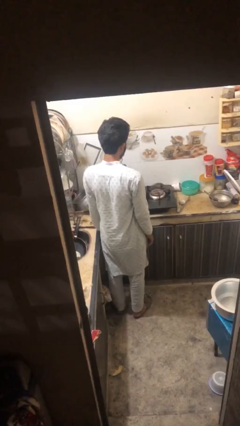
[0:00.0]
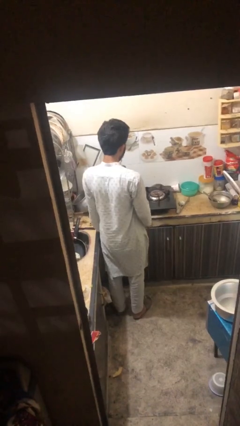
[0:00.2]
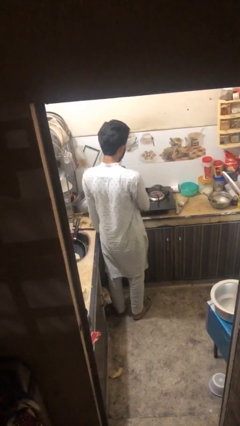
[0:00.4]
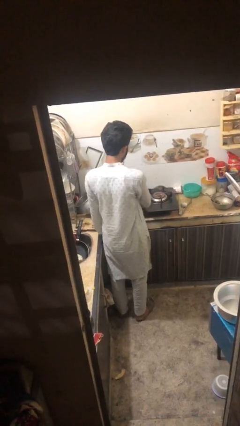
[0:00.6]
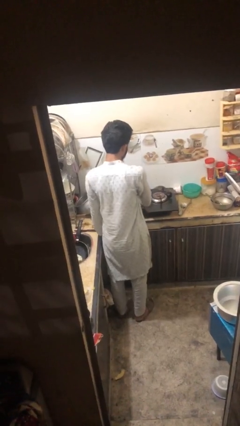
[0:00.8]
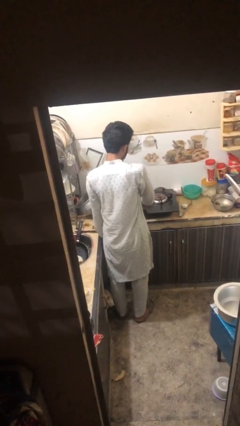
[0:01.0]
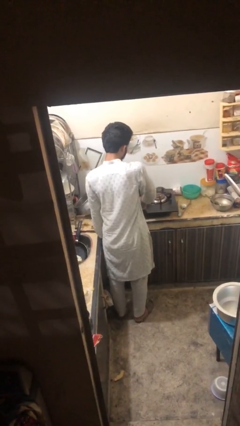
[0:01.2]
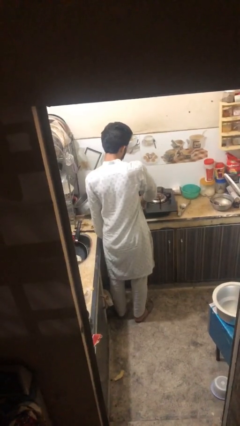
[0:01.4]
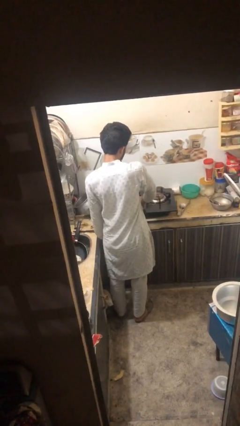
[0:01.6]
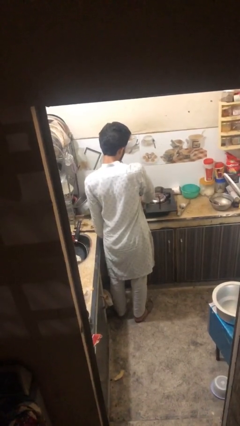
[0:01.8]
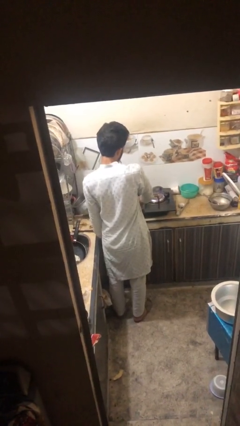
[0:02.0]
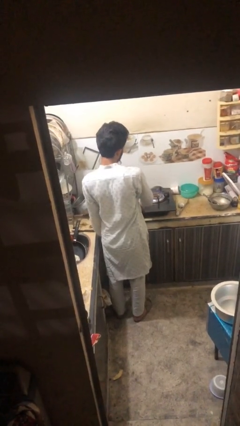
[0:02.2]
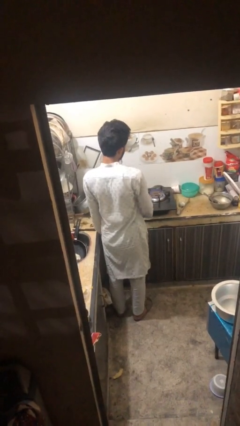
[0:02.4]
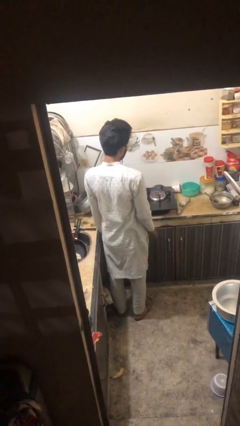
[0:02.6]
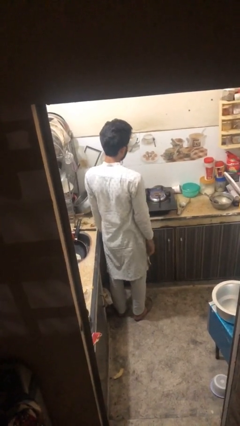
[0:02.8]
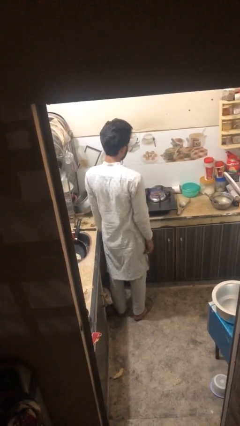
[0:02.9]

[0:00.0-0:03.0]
person turns on stovetop

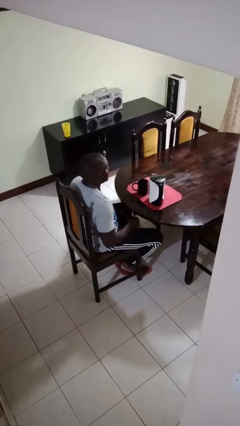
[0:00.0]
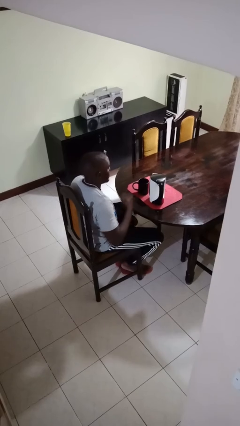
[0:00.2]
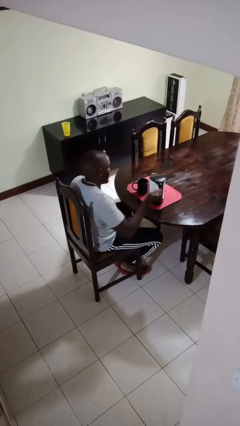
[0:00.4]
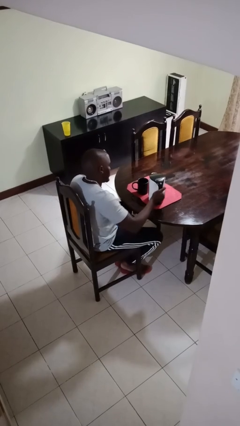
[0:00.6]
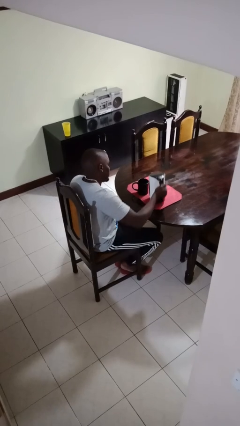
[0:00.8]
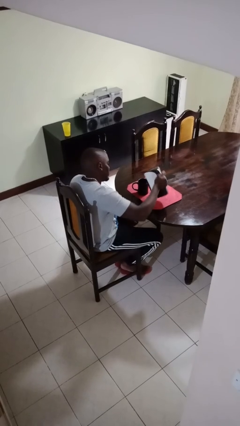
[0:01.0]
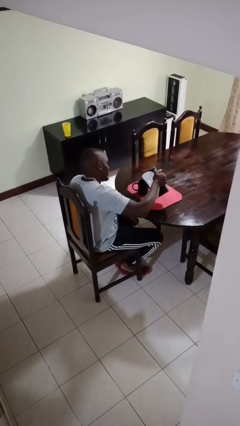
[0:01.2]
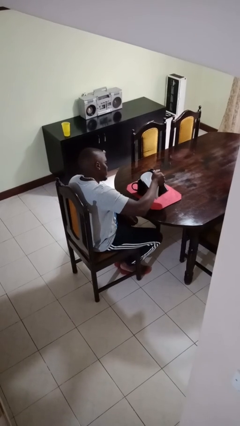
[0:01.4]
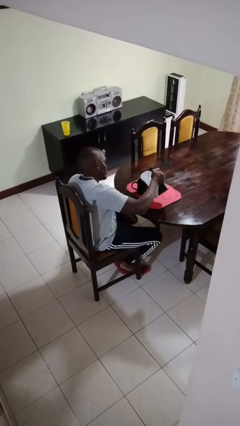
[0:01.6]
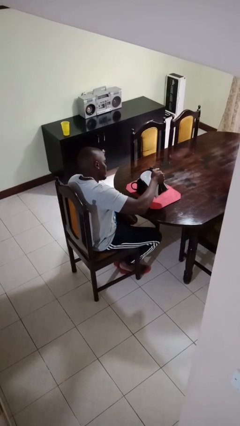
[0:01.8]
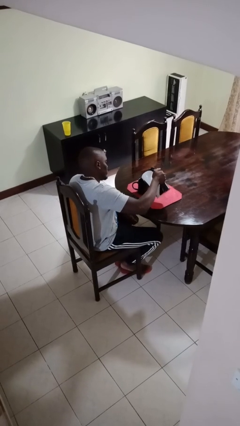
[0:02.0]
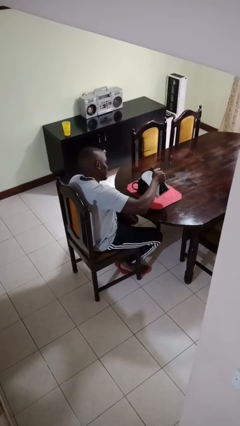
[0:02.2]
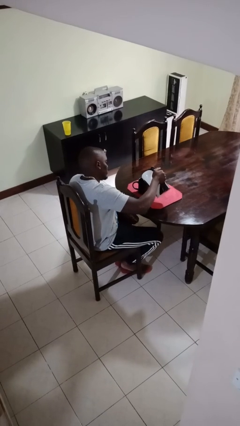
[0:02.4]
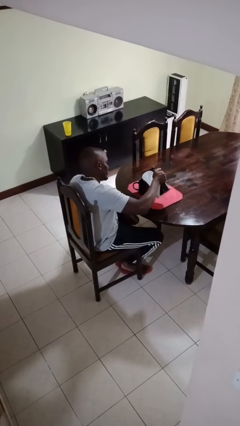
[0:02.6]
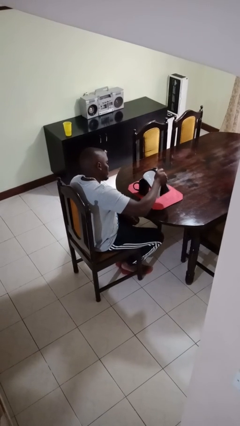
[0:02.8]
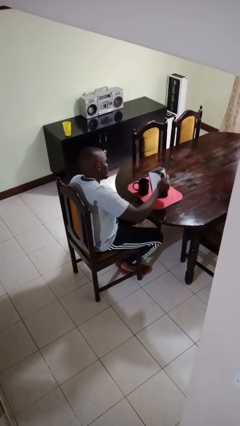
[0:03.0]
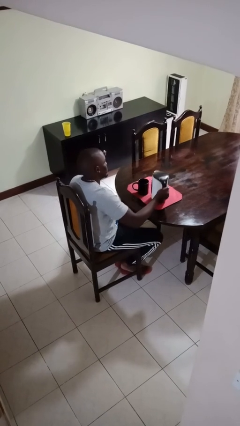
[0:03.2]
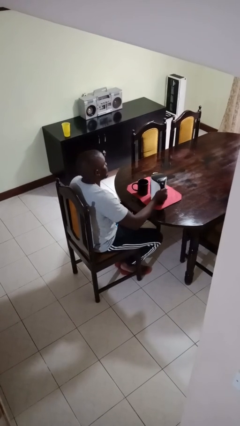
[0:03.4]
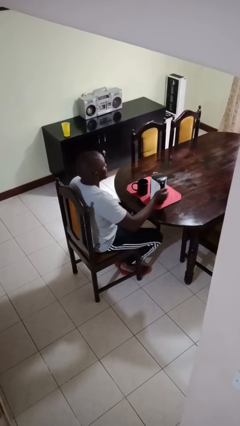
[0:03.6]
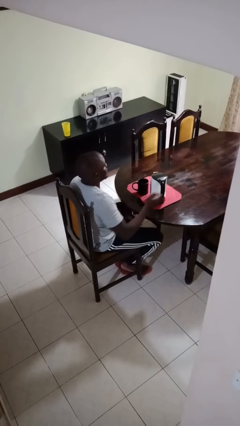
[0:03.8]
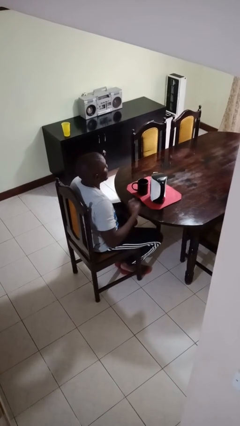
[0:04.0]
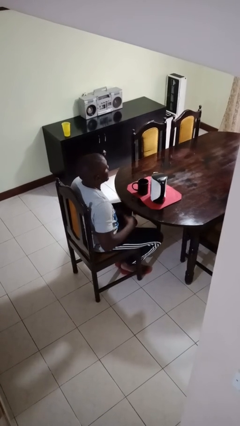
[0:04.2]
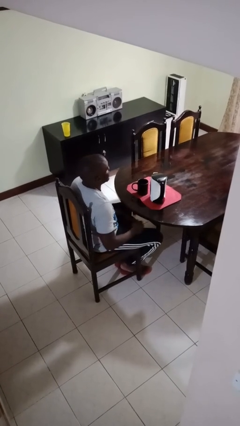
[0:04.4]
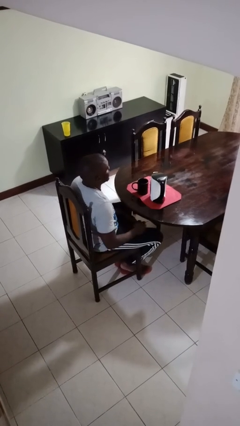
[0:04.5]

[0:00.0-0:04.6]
person pours coffee into mug

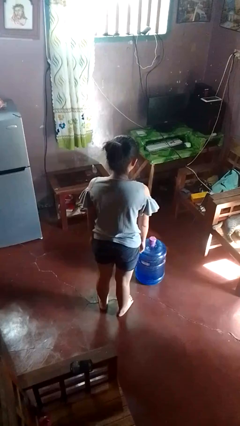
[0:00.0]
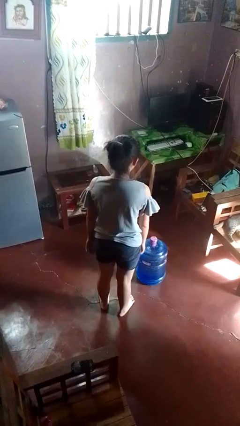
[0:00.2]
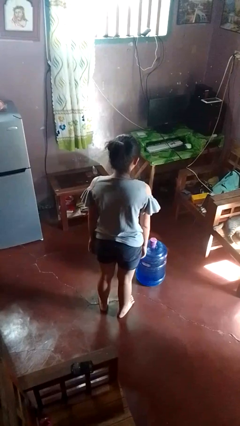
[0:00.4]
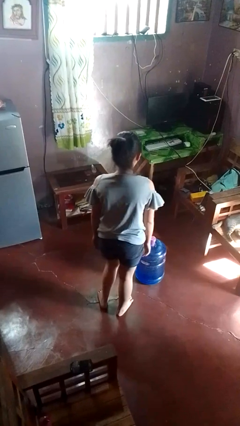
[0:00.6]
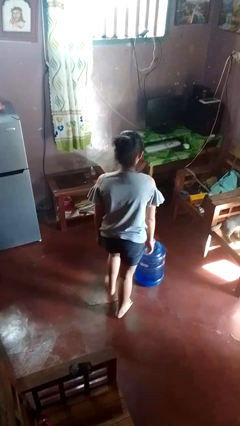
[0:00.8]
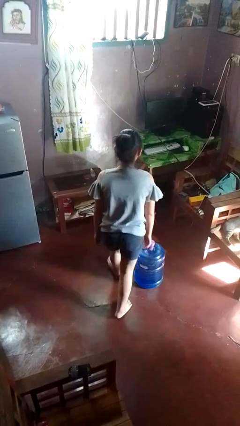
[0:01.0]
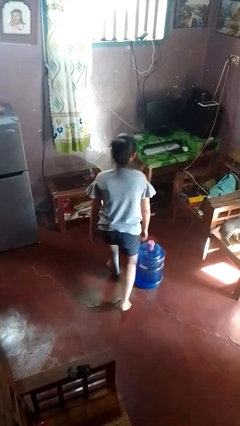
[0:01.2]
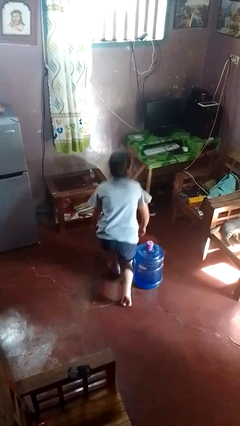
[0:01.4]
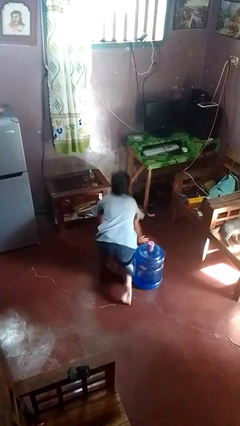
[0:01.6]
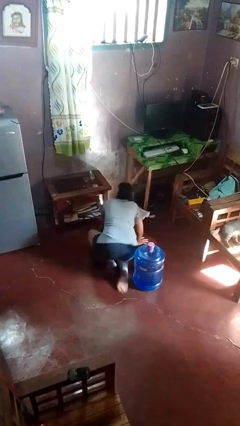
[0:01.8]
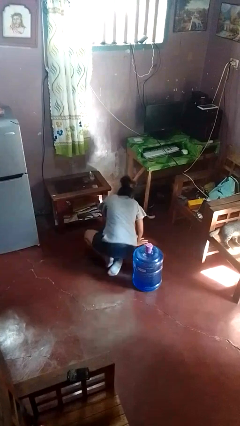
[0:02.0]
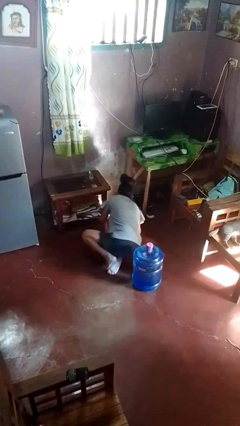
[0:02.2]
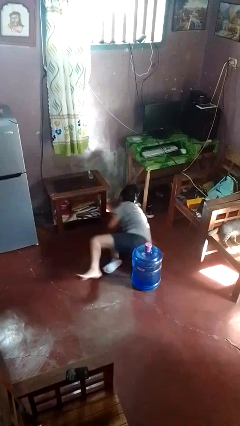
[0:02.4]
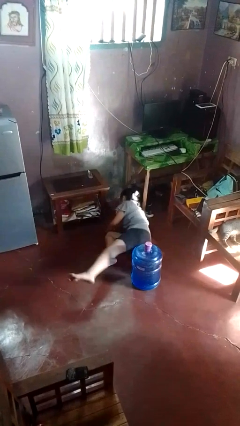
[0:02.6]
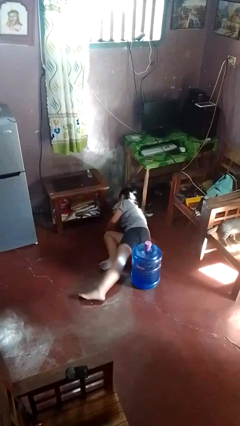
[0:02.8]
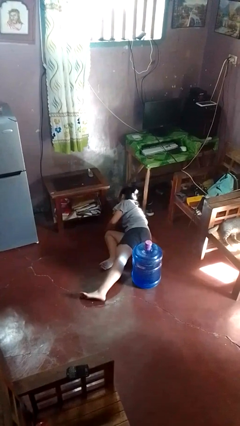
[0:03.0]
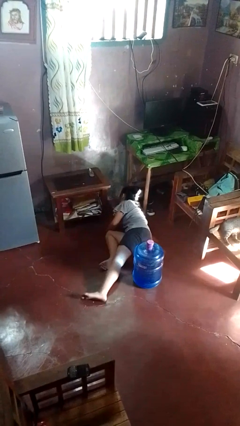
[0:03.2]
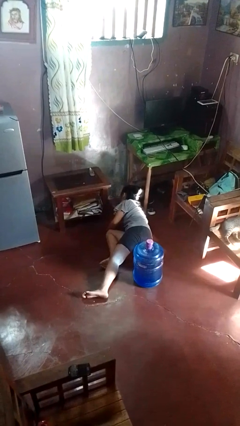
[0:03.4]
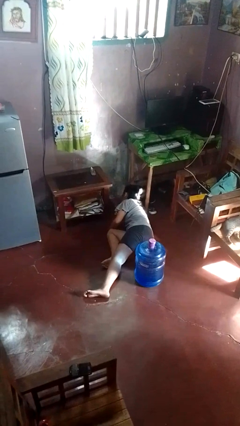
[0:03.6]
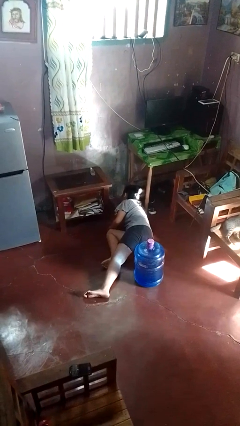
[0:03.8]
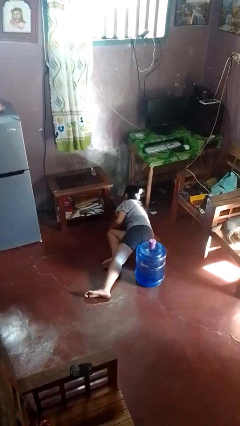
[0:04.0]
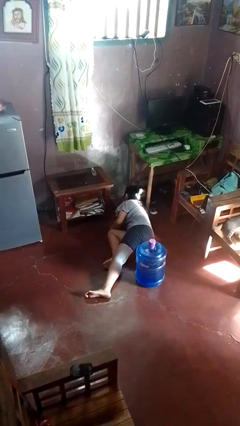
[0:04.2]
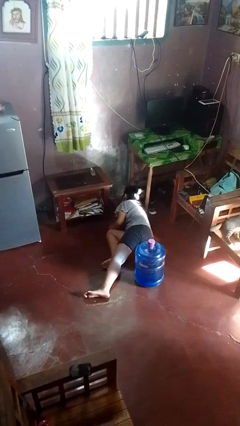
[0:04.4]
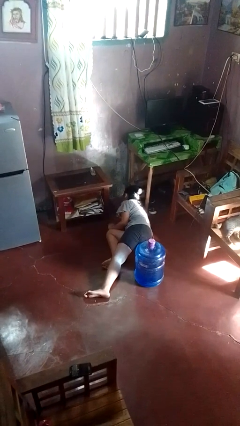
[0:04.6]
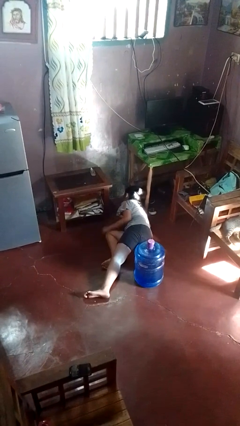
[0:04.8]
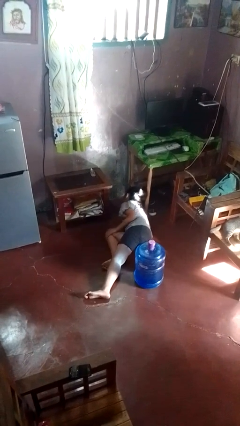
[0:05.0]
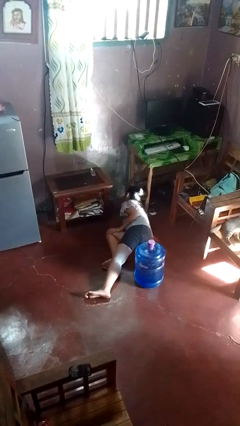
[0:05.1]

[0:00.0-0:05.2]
person trips on object on floor

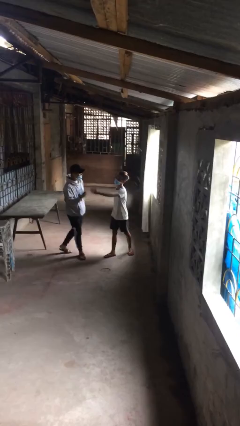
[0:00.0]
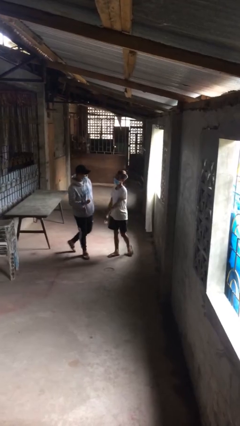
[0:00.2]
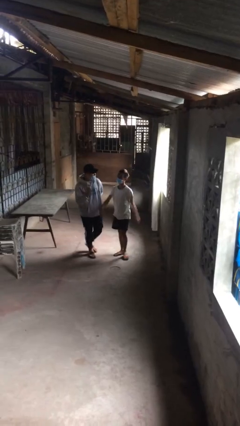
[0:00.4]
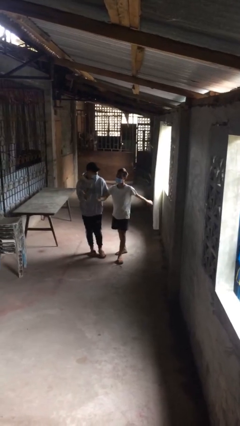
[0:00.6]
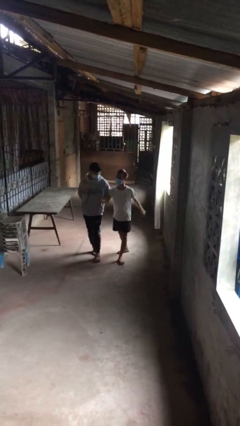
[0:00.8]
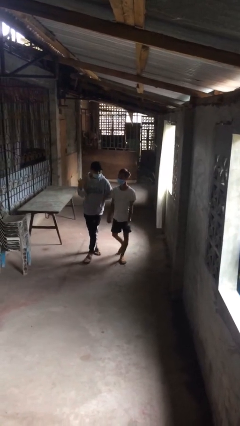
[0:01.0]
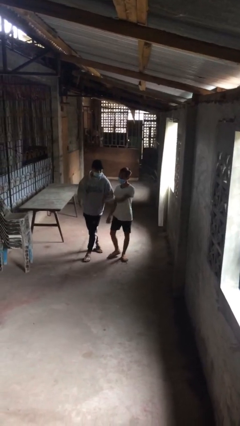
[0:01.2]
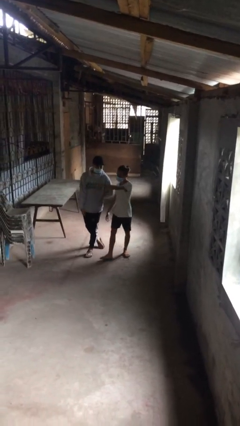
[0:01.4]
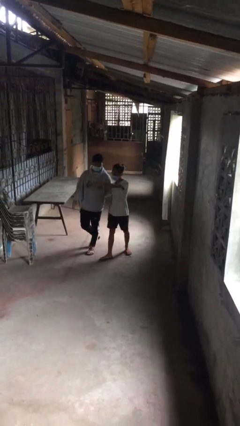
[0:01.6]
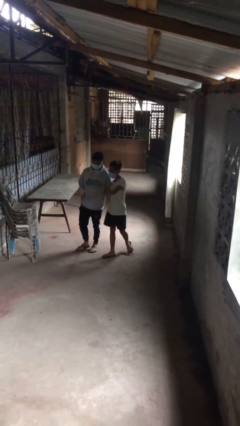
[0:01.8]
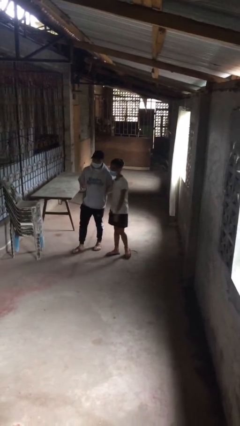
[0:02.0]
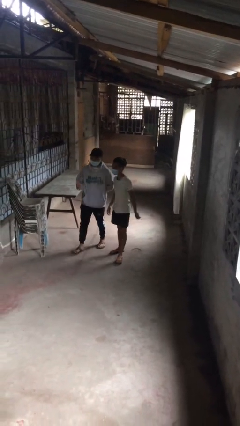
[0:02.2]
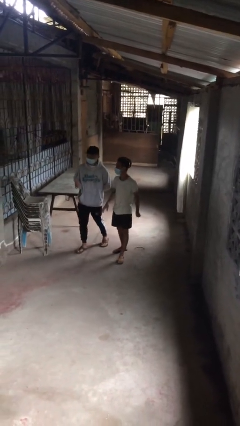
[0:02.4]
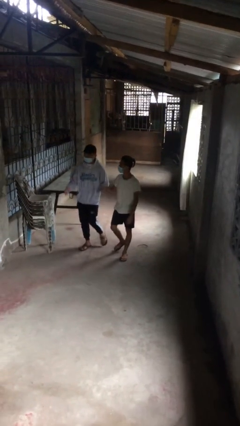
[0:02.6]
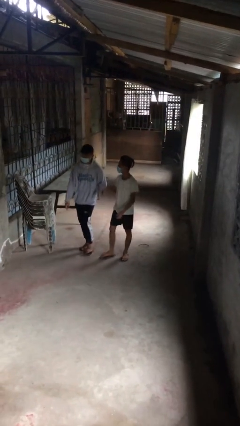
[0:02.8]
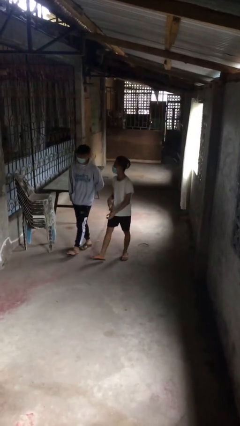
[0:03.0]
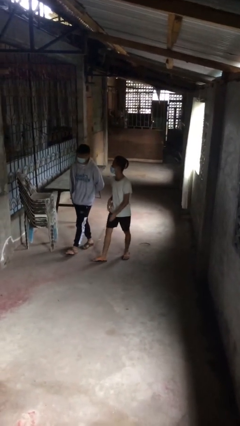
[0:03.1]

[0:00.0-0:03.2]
person talks to person

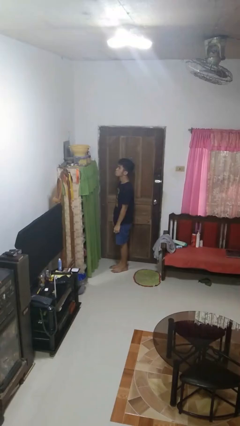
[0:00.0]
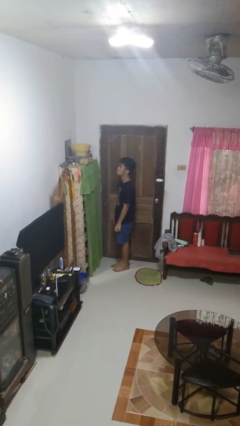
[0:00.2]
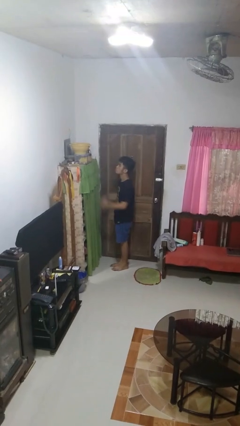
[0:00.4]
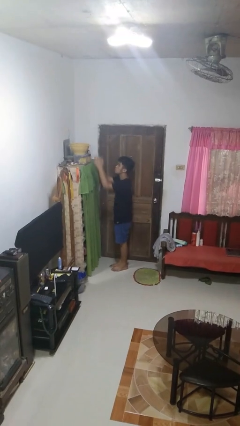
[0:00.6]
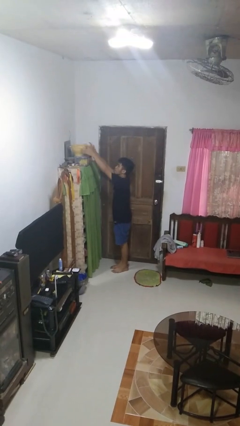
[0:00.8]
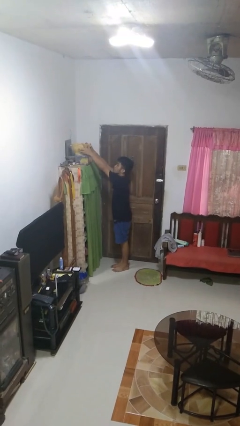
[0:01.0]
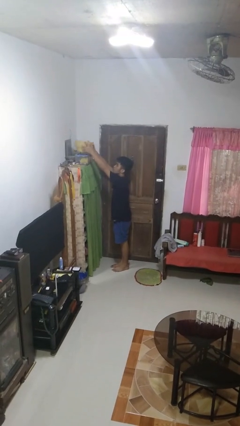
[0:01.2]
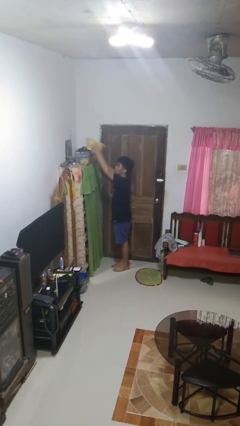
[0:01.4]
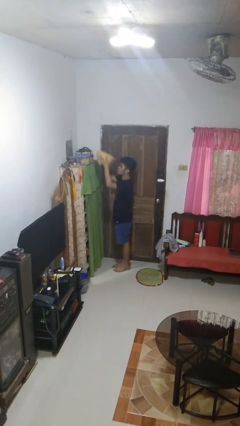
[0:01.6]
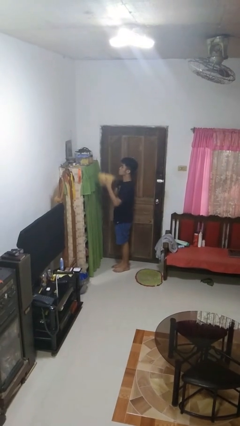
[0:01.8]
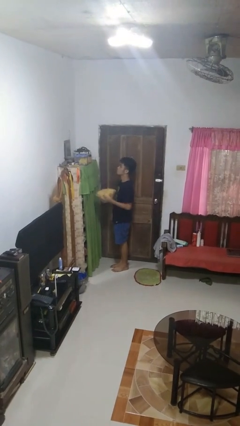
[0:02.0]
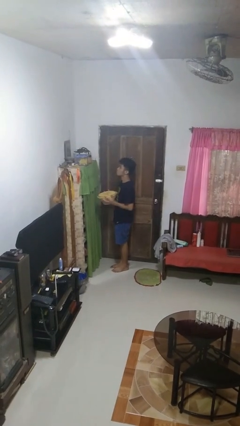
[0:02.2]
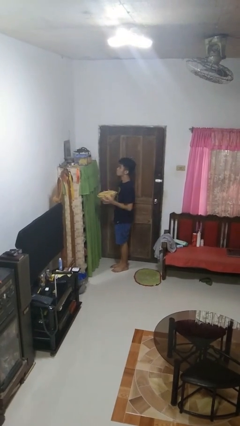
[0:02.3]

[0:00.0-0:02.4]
person picks up object from shelf
